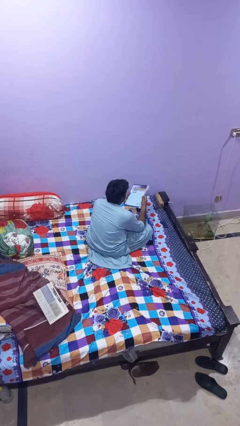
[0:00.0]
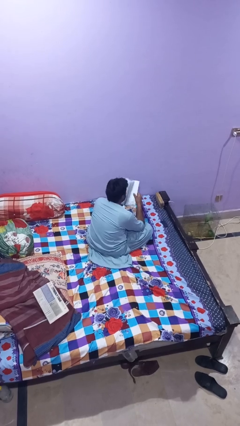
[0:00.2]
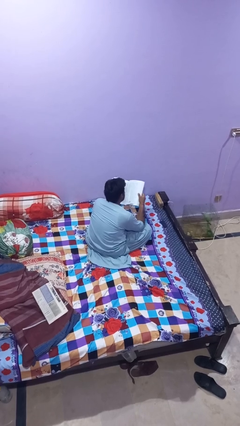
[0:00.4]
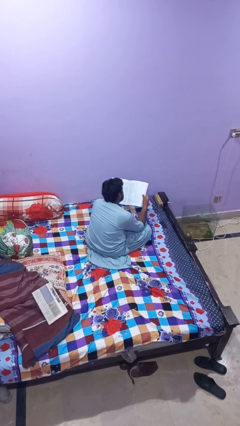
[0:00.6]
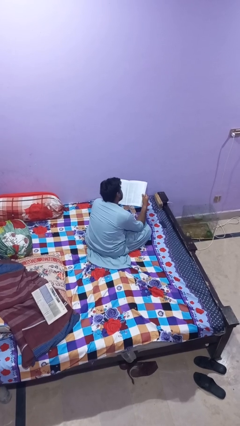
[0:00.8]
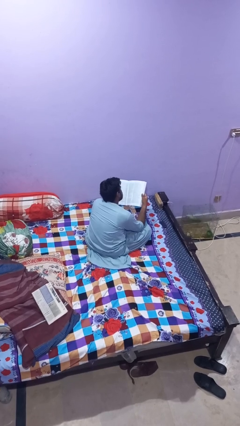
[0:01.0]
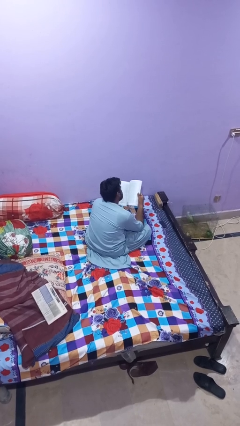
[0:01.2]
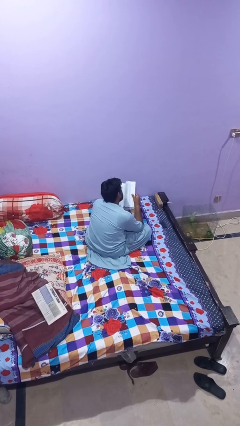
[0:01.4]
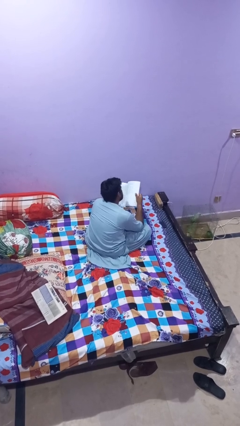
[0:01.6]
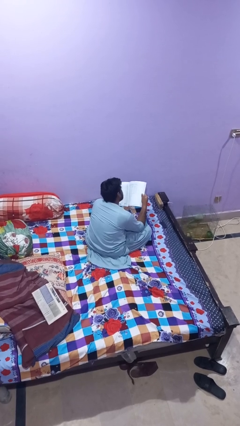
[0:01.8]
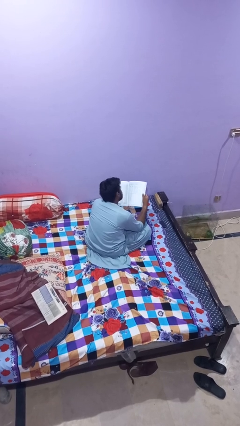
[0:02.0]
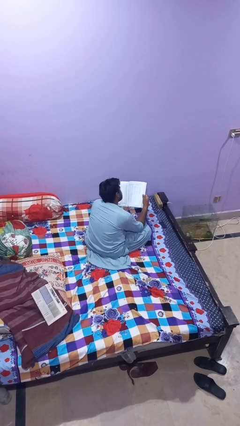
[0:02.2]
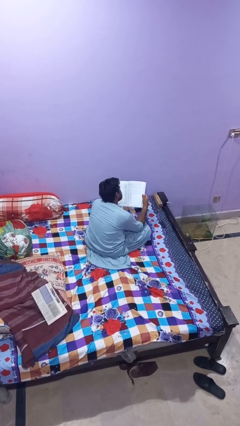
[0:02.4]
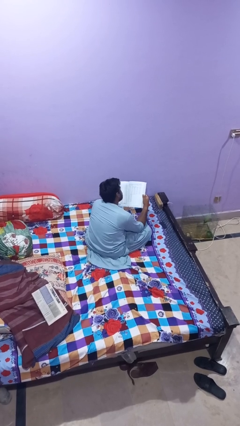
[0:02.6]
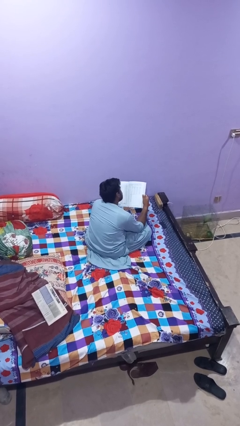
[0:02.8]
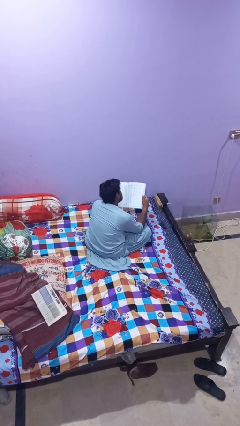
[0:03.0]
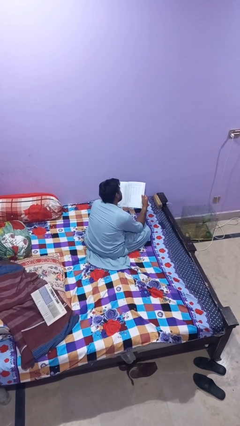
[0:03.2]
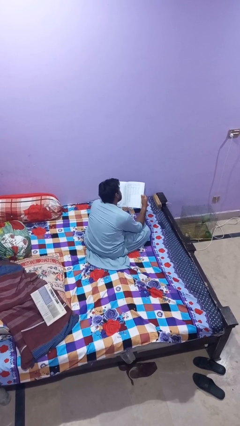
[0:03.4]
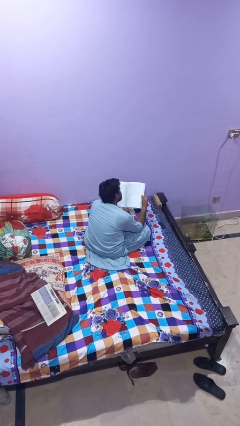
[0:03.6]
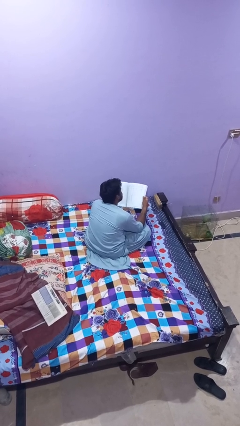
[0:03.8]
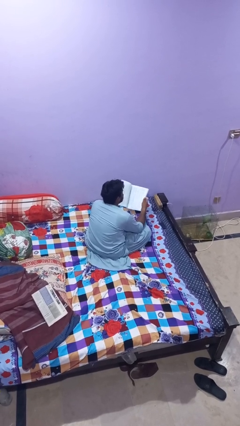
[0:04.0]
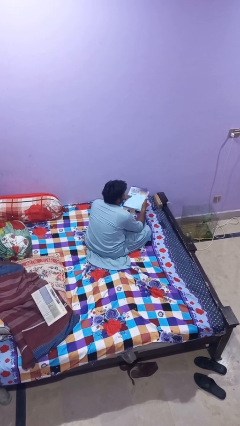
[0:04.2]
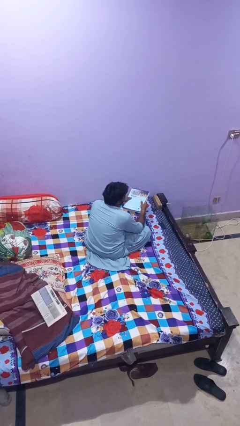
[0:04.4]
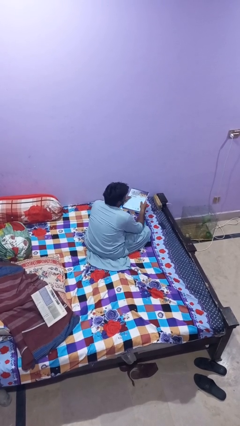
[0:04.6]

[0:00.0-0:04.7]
person reads magazine

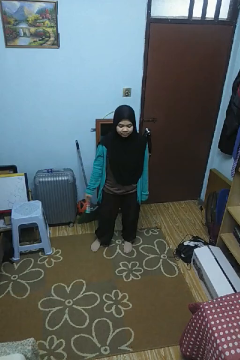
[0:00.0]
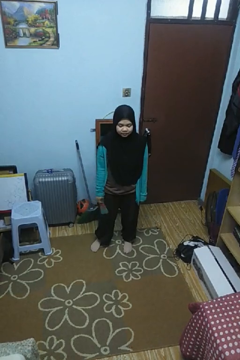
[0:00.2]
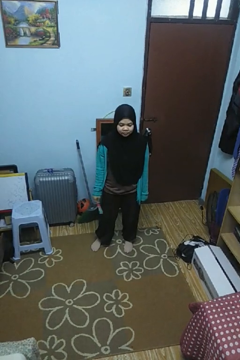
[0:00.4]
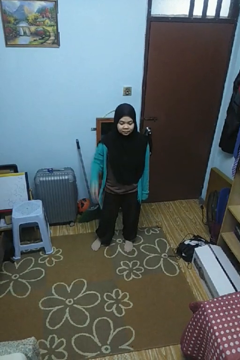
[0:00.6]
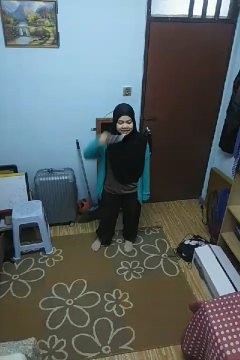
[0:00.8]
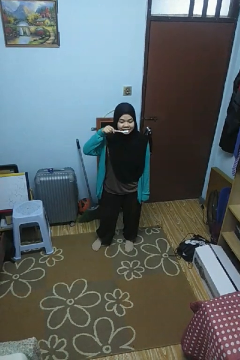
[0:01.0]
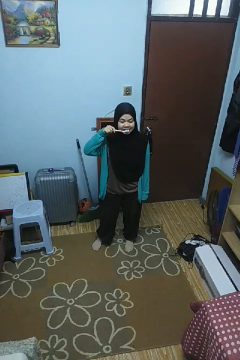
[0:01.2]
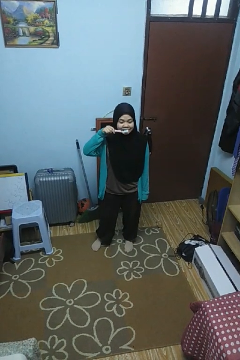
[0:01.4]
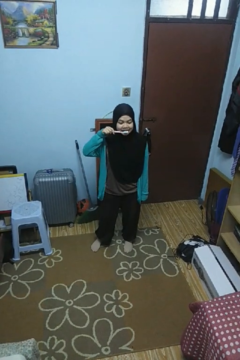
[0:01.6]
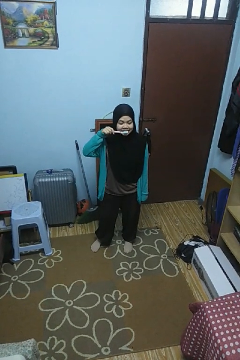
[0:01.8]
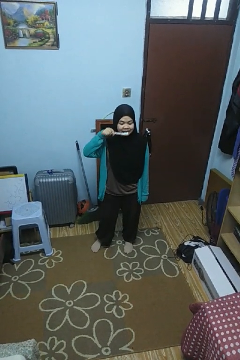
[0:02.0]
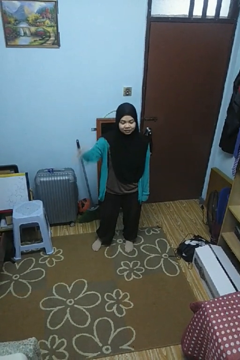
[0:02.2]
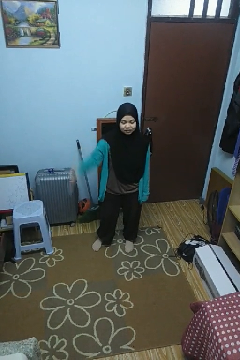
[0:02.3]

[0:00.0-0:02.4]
person brushes teeth

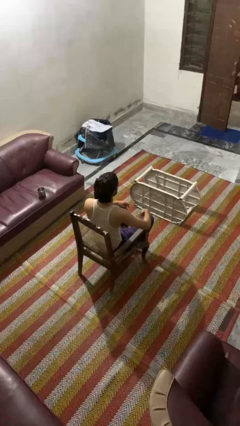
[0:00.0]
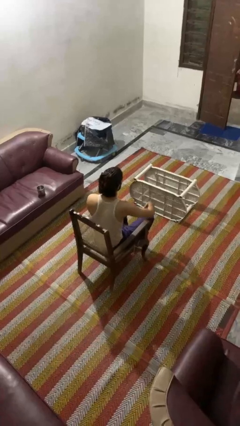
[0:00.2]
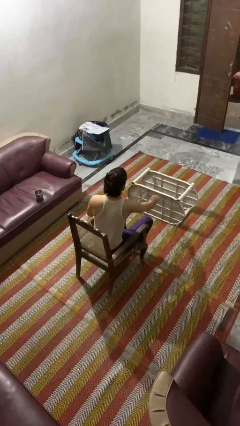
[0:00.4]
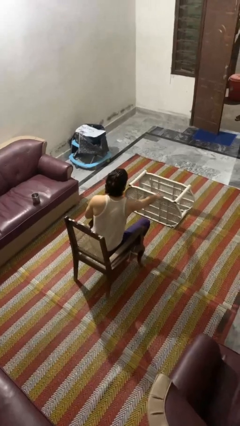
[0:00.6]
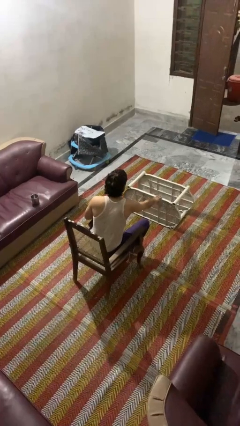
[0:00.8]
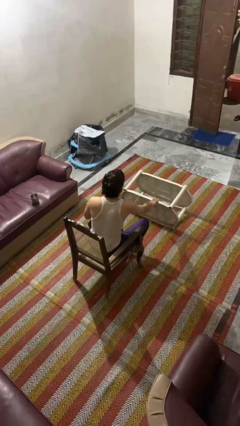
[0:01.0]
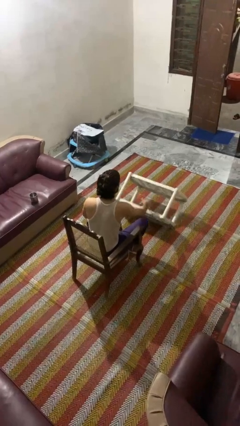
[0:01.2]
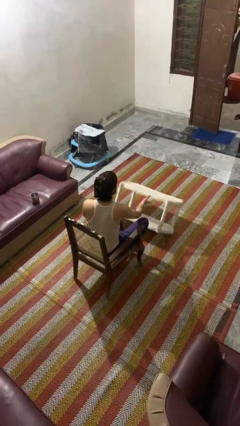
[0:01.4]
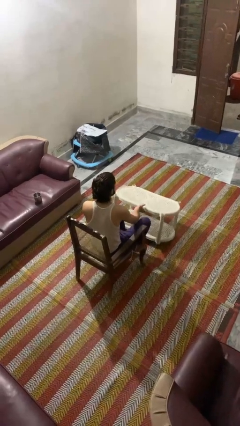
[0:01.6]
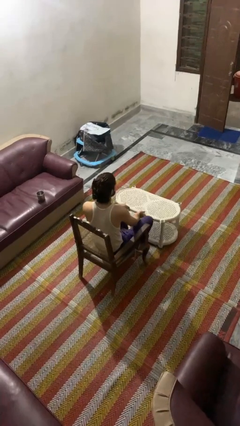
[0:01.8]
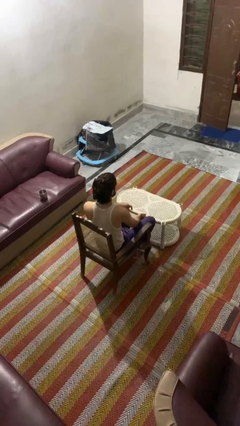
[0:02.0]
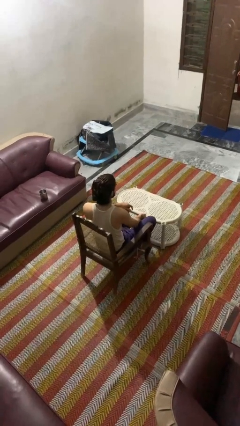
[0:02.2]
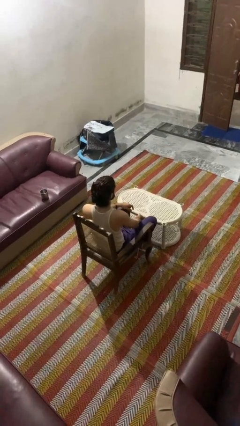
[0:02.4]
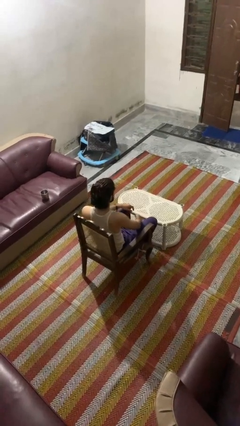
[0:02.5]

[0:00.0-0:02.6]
person sets upright furniture

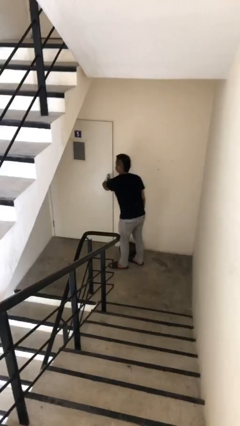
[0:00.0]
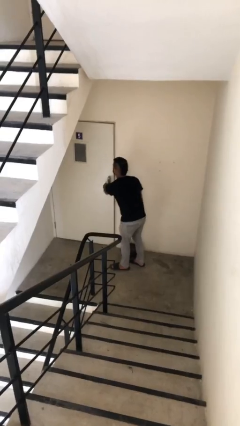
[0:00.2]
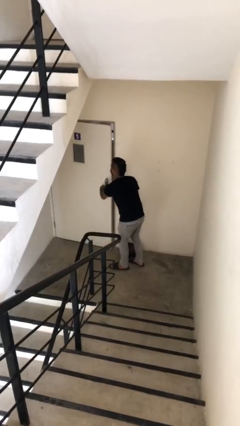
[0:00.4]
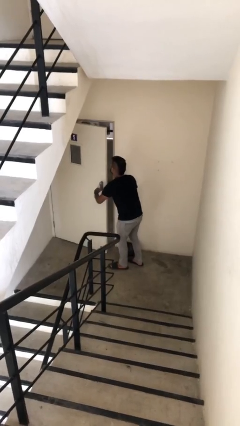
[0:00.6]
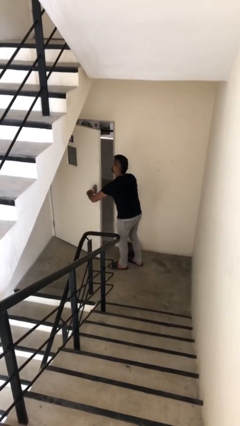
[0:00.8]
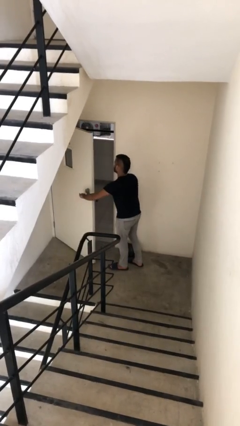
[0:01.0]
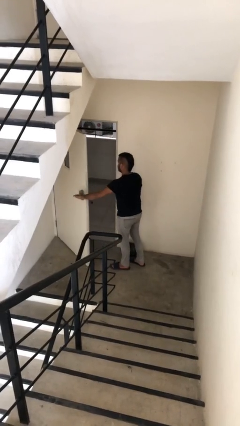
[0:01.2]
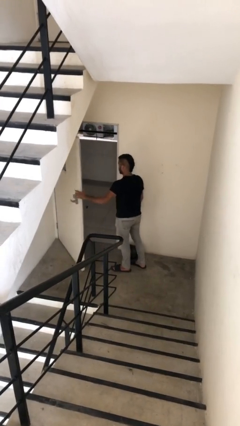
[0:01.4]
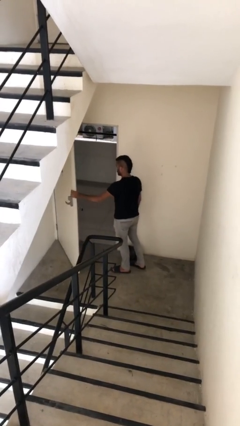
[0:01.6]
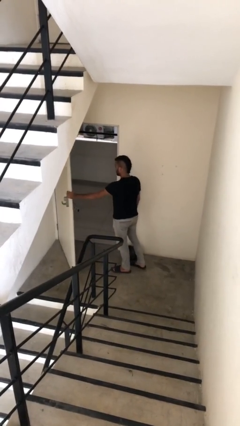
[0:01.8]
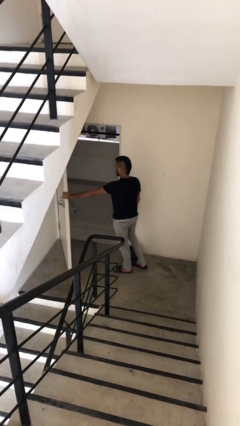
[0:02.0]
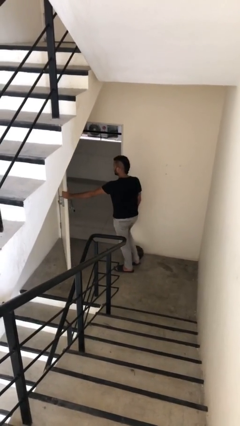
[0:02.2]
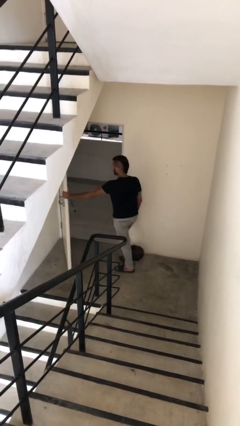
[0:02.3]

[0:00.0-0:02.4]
person opens facility door

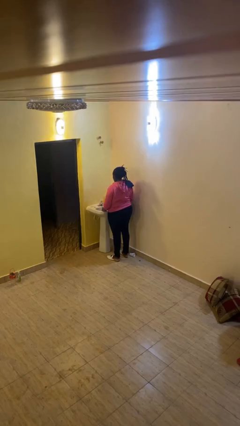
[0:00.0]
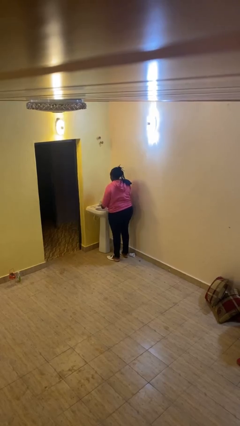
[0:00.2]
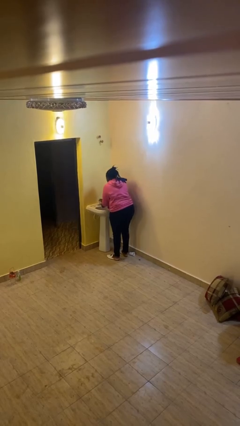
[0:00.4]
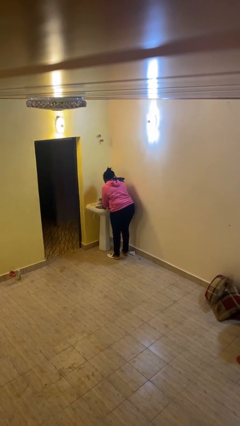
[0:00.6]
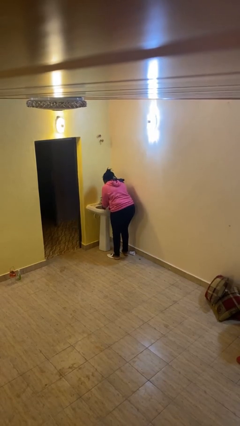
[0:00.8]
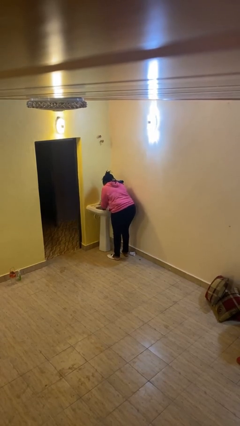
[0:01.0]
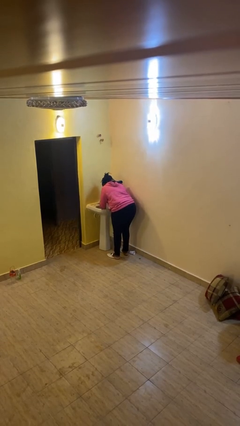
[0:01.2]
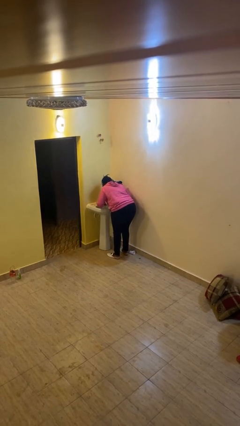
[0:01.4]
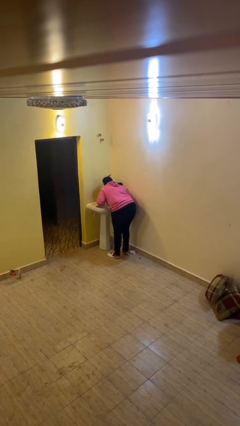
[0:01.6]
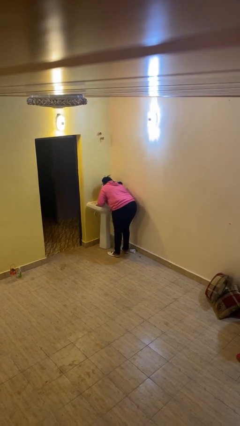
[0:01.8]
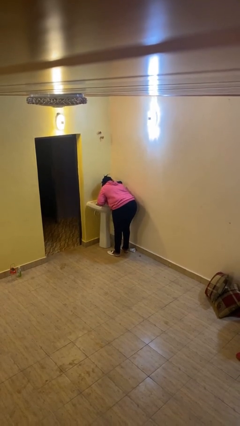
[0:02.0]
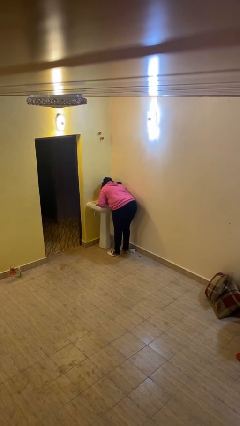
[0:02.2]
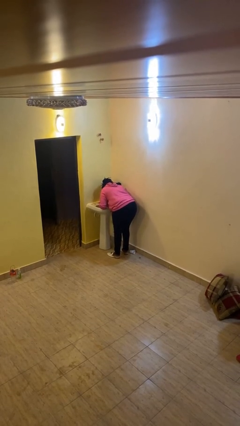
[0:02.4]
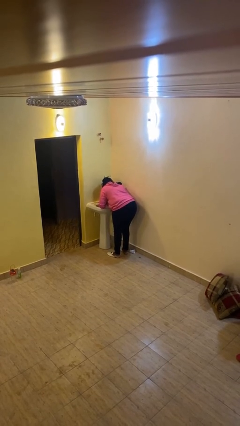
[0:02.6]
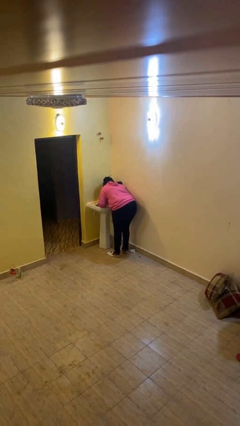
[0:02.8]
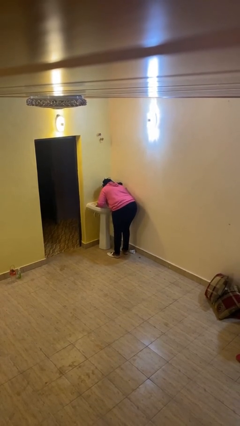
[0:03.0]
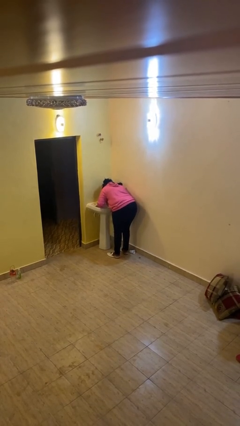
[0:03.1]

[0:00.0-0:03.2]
person washes face

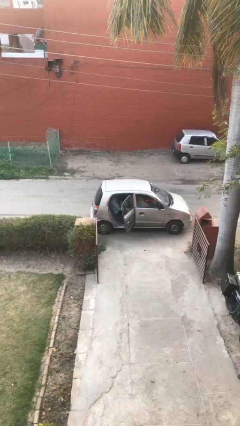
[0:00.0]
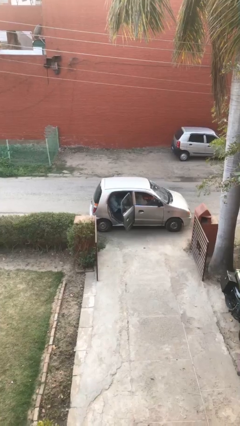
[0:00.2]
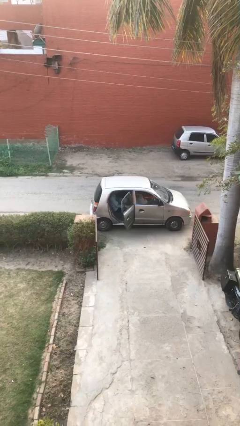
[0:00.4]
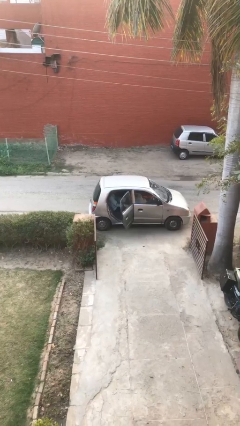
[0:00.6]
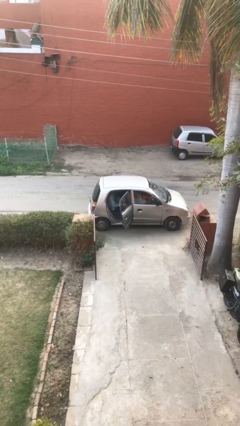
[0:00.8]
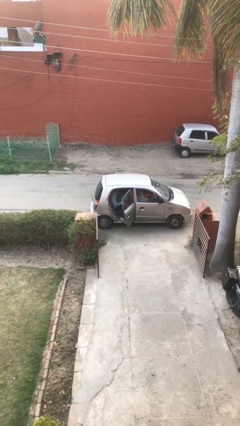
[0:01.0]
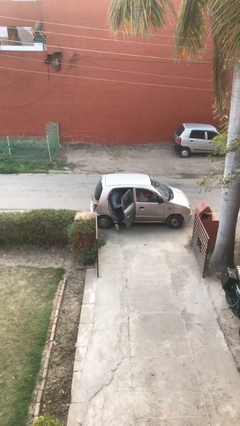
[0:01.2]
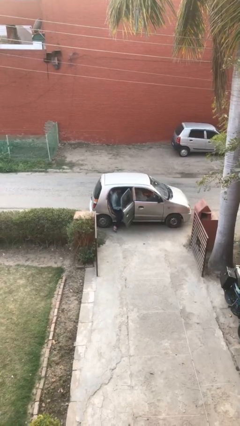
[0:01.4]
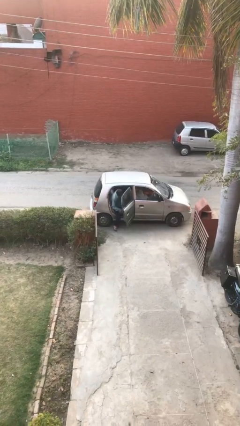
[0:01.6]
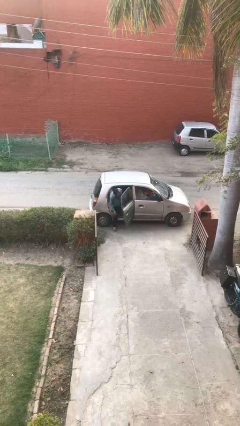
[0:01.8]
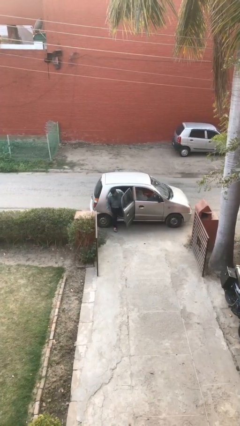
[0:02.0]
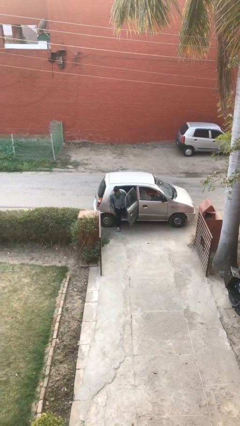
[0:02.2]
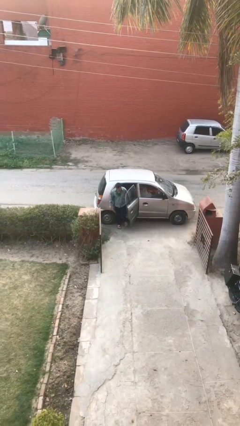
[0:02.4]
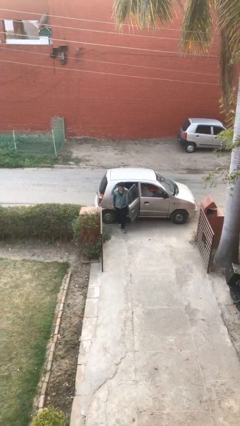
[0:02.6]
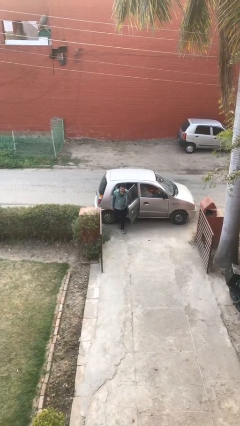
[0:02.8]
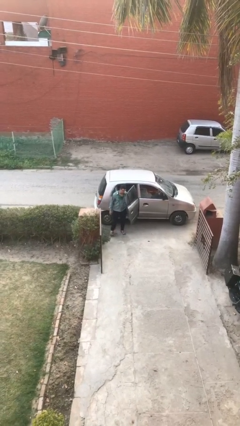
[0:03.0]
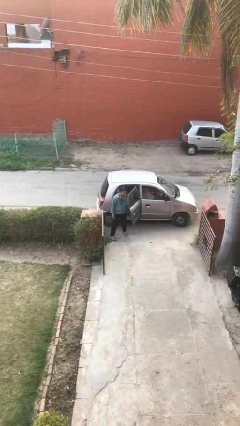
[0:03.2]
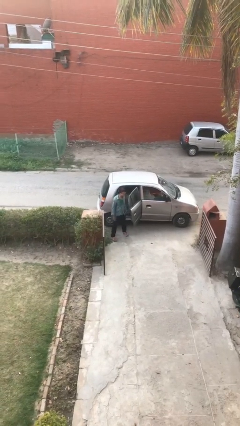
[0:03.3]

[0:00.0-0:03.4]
person exits car
